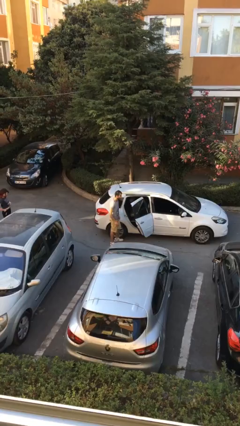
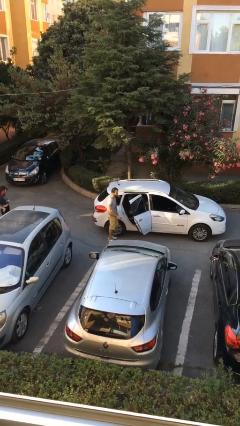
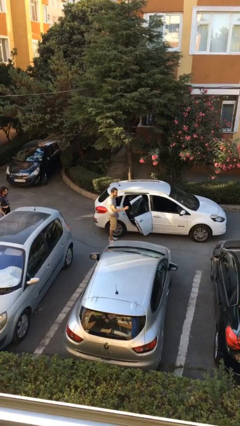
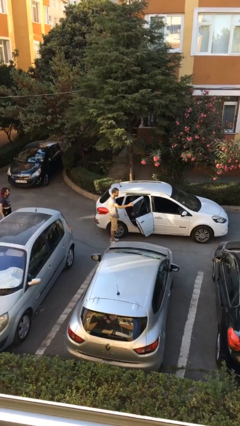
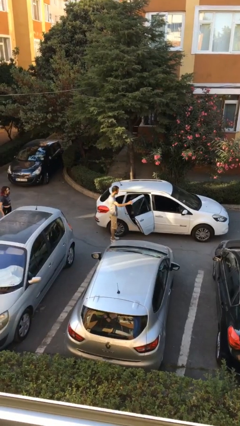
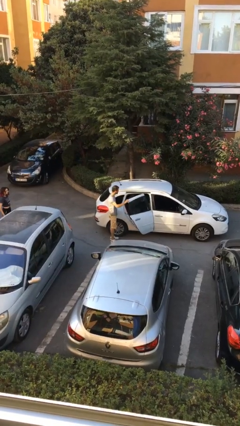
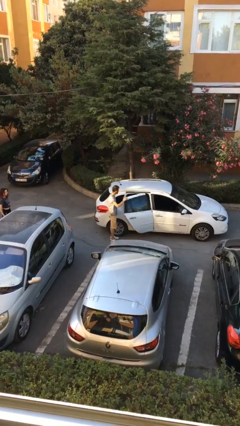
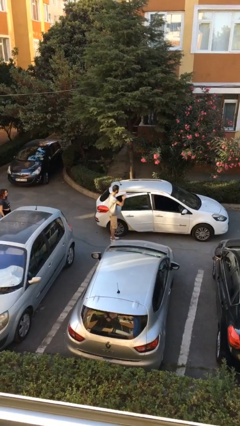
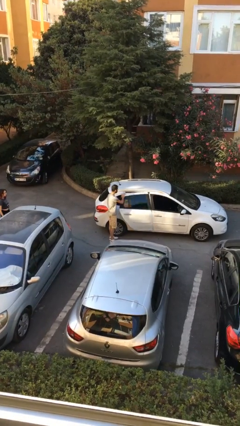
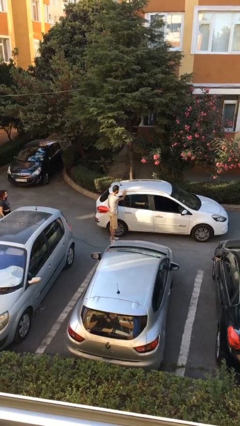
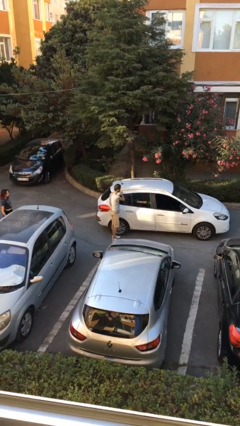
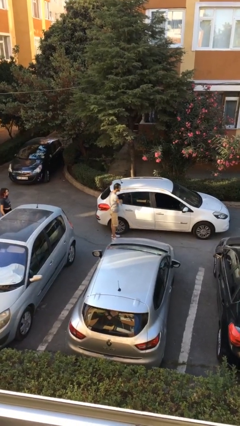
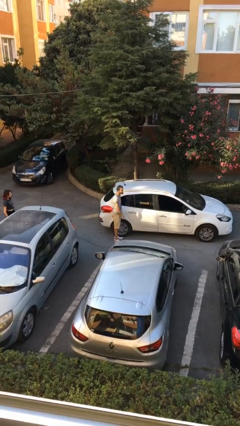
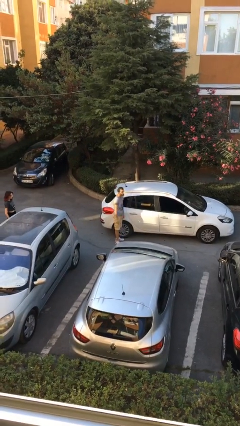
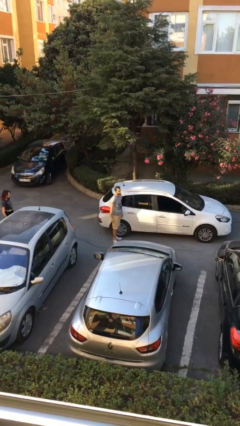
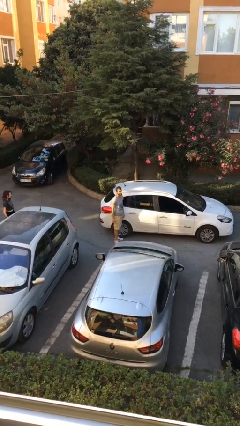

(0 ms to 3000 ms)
person closes car door

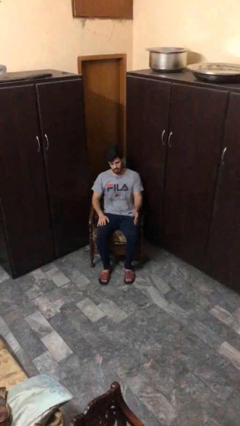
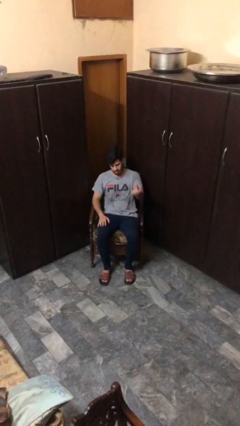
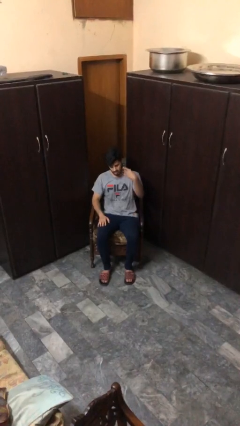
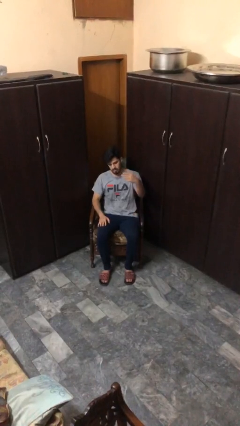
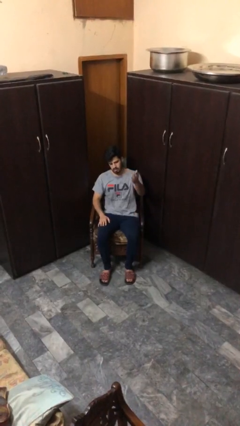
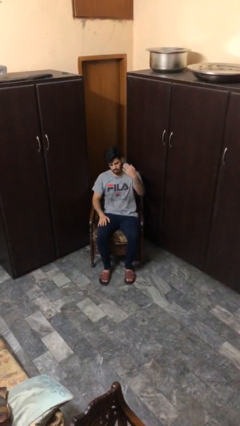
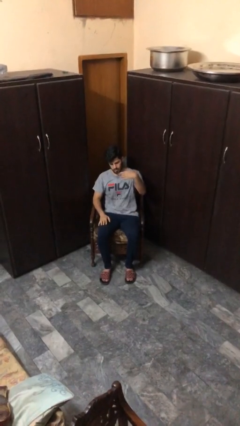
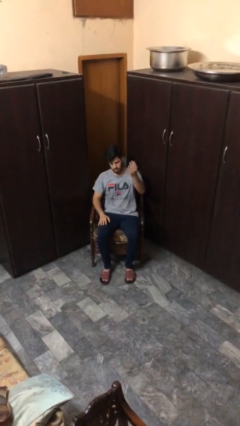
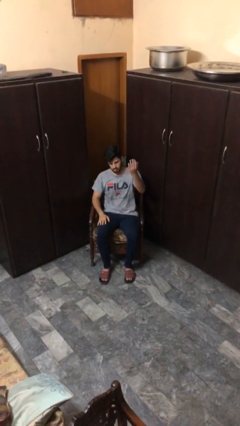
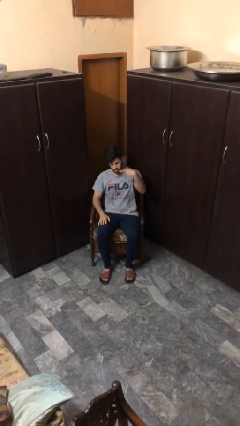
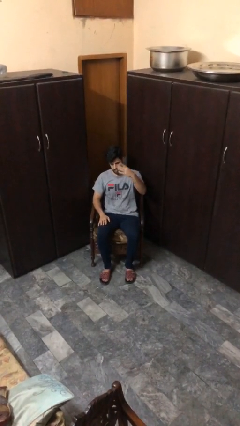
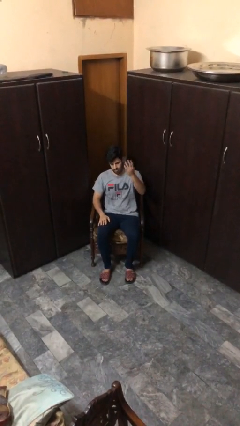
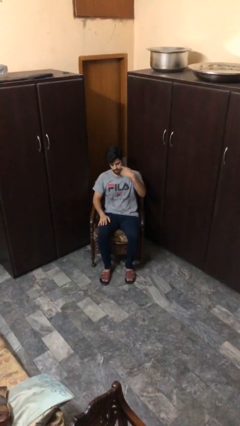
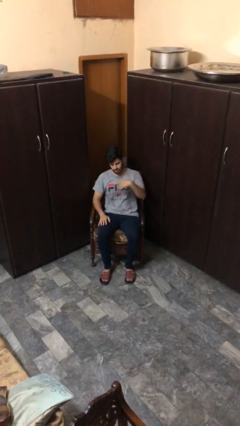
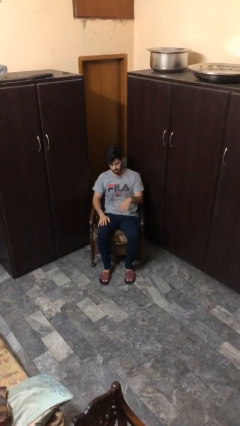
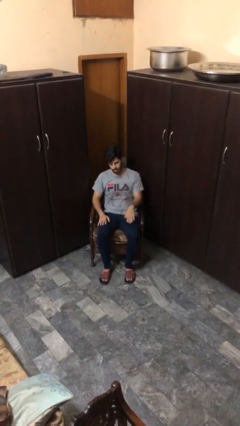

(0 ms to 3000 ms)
person gestures come here

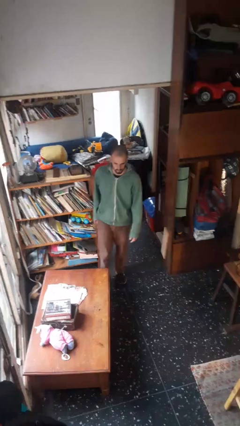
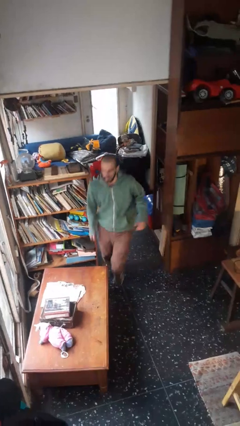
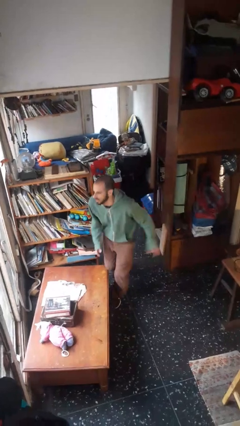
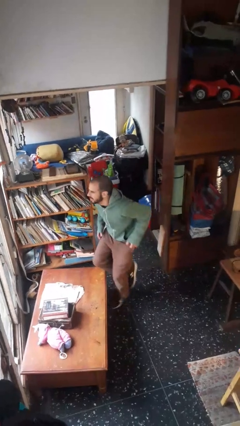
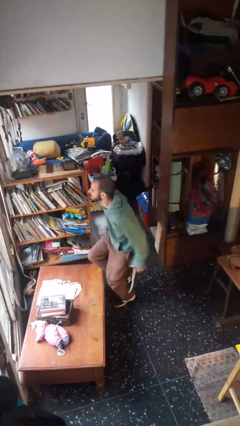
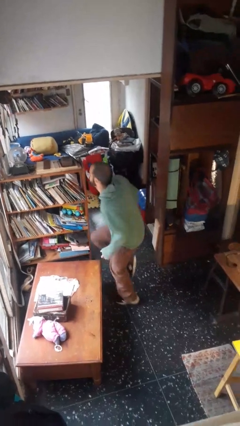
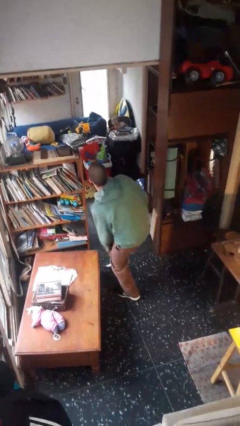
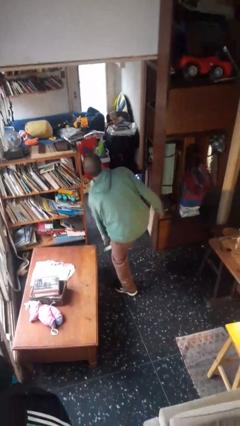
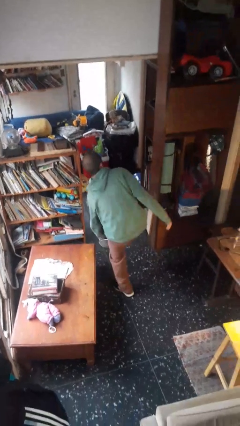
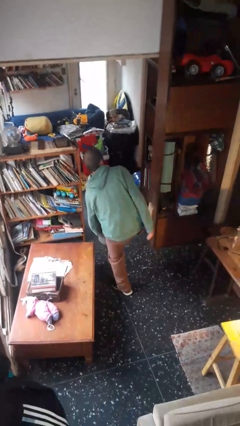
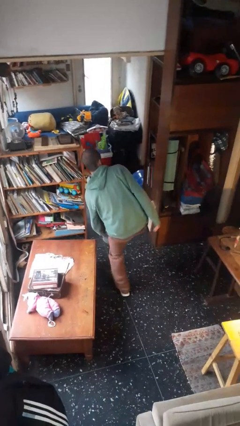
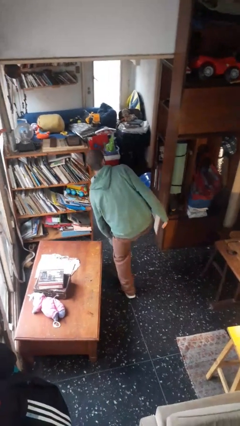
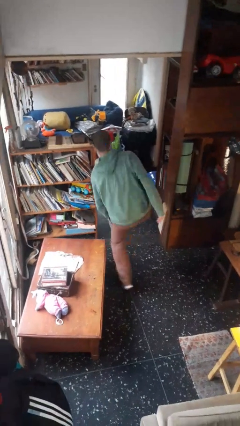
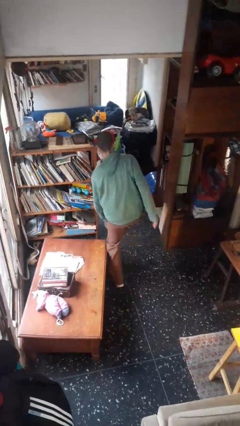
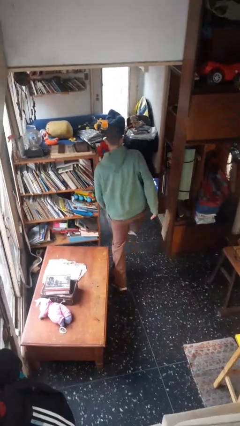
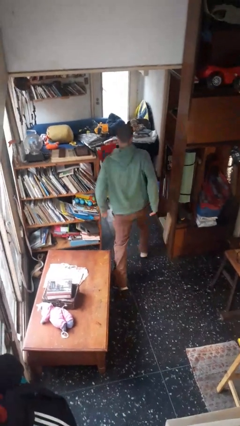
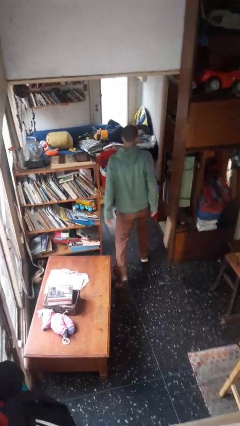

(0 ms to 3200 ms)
person bumps into table

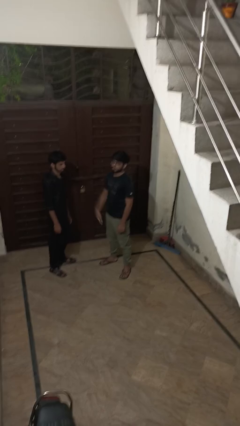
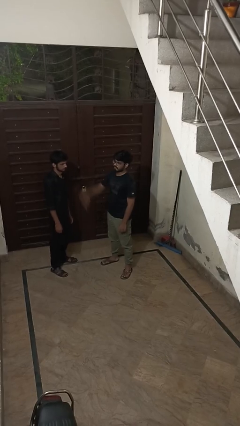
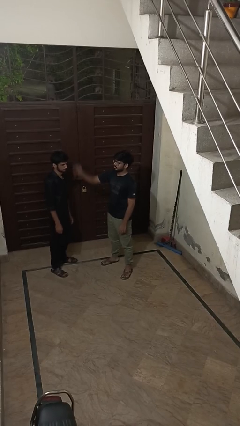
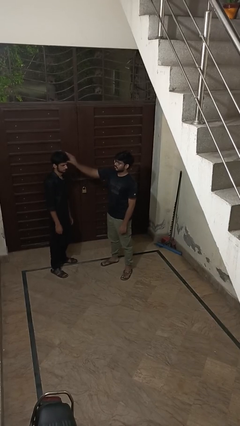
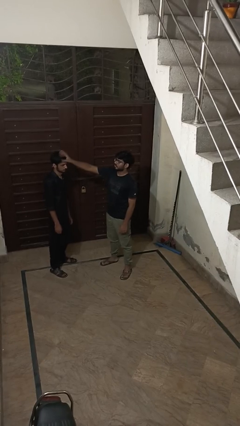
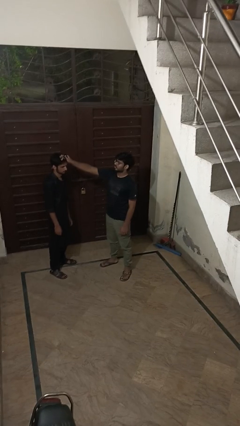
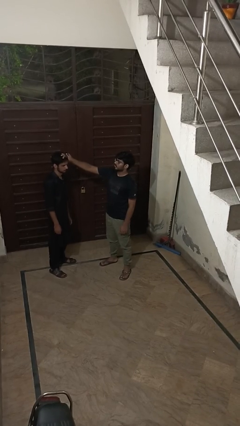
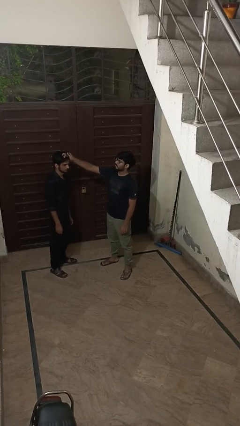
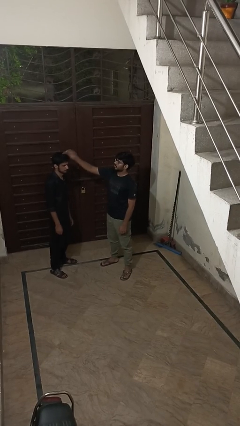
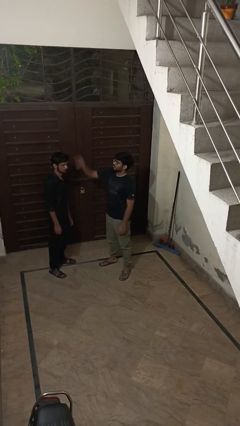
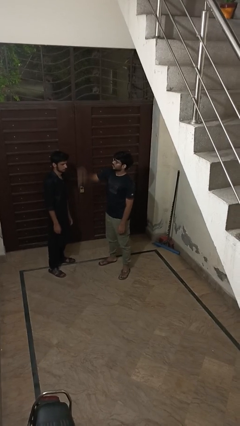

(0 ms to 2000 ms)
person grabs person by hair

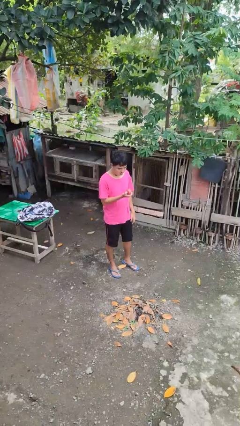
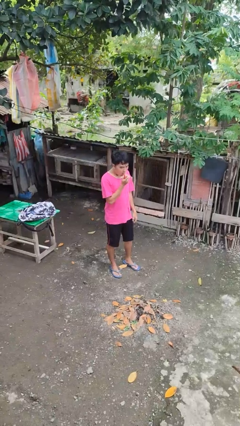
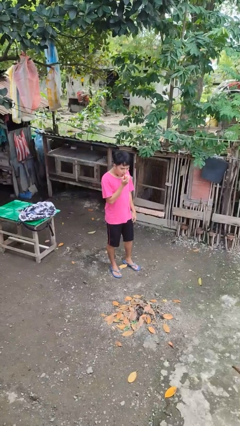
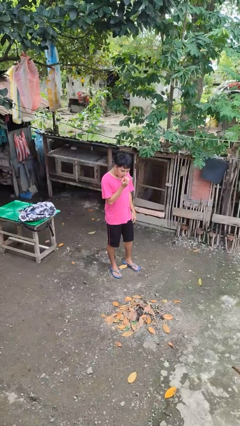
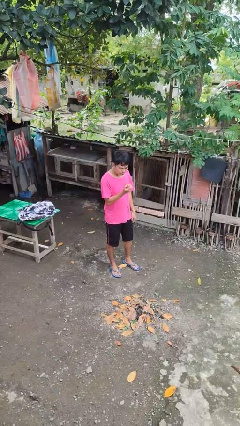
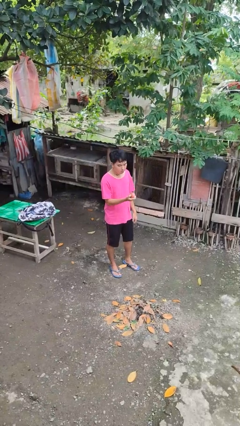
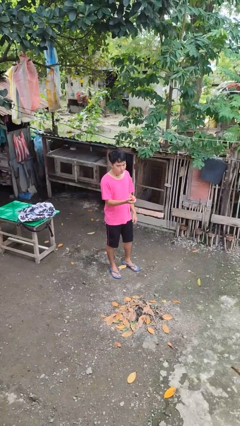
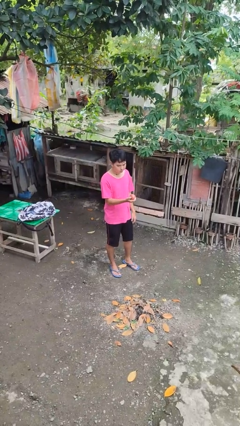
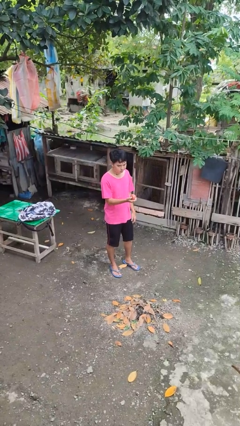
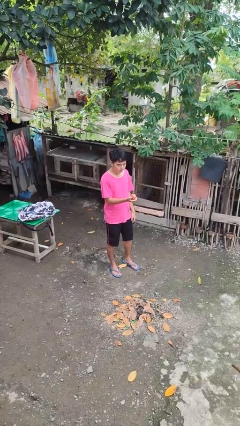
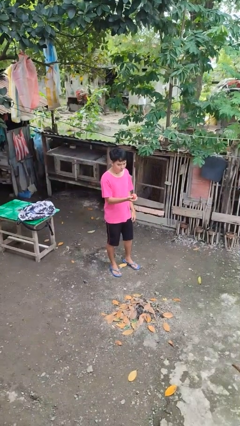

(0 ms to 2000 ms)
person eats apple

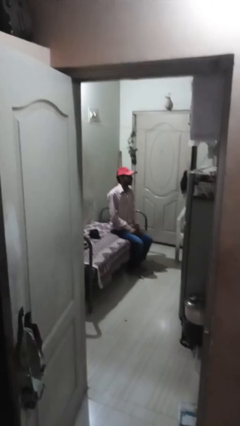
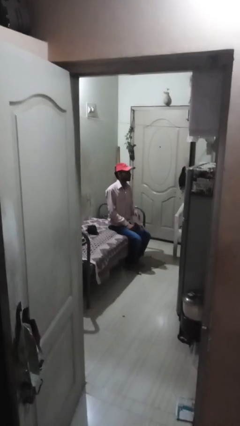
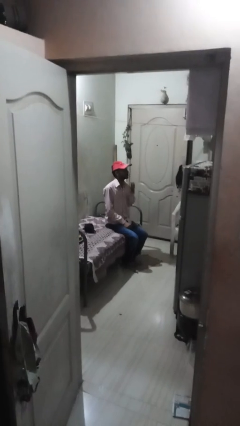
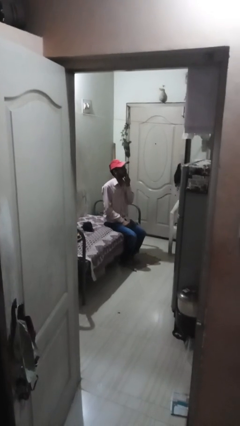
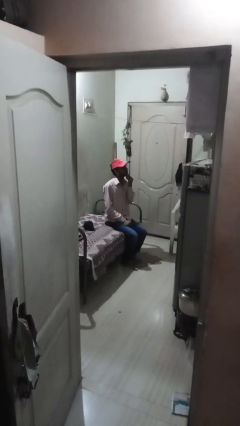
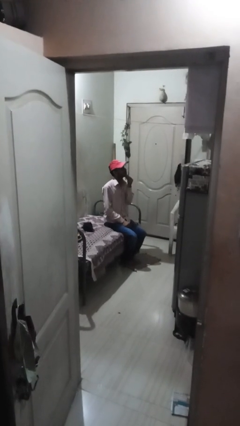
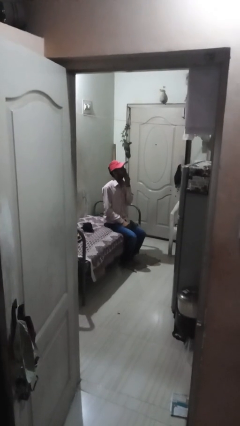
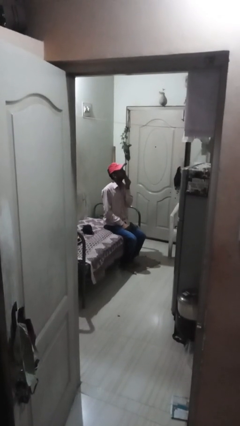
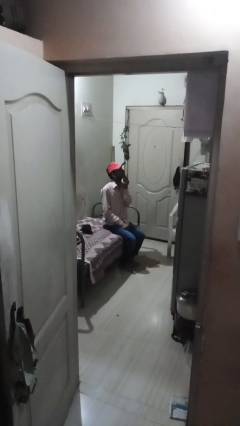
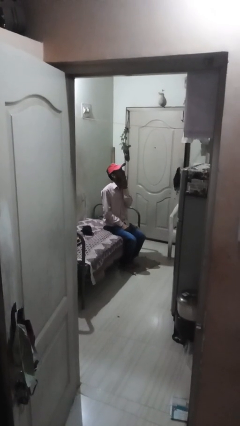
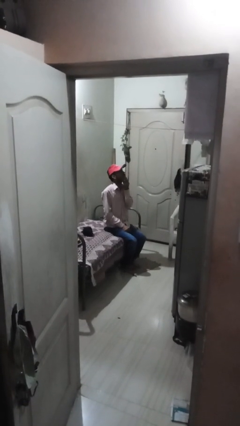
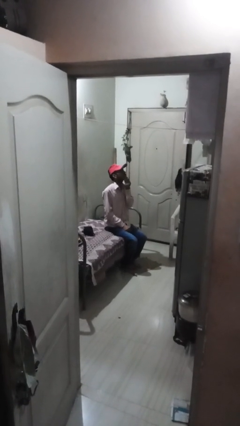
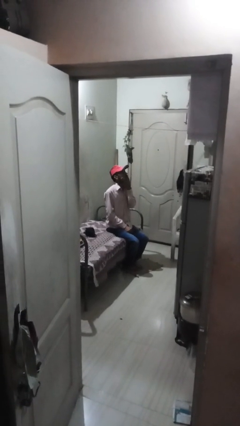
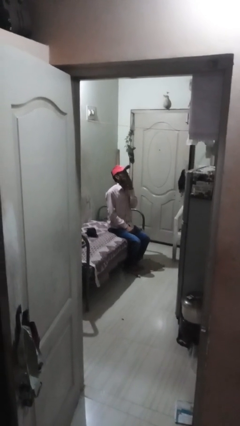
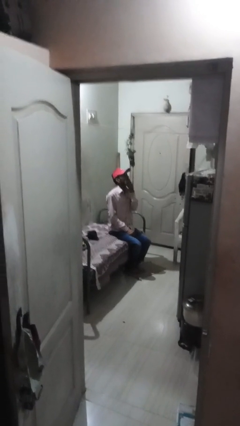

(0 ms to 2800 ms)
person strokes chin

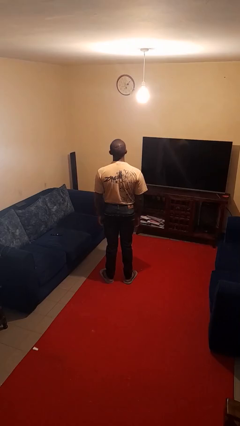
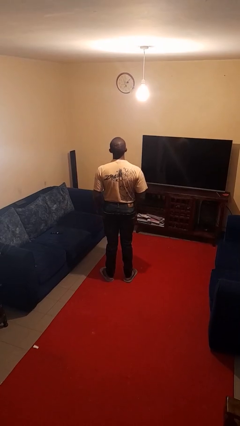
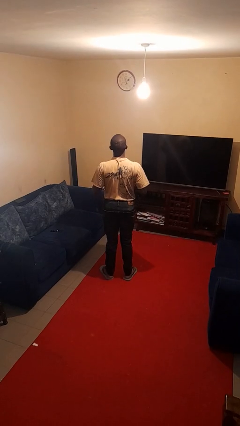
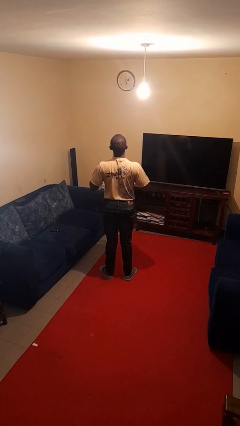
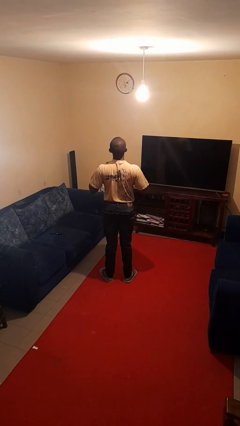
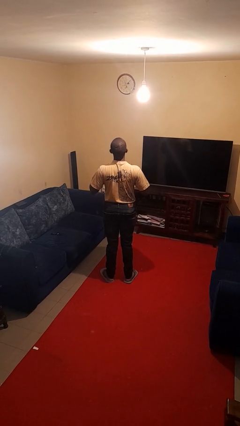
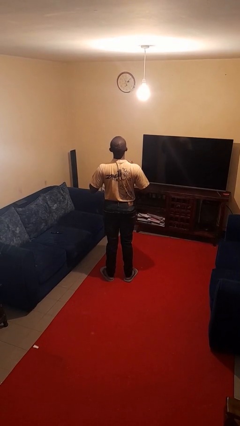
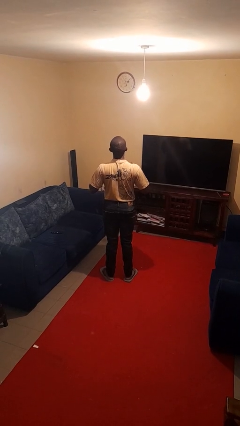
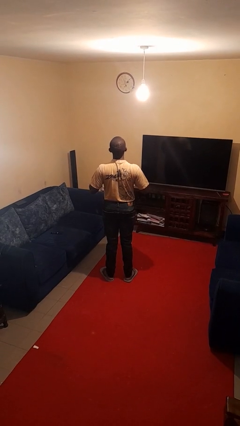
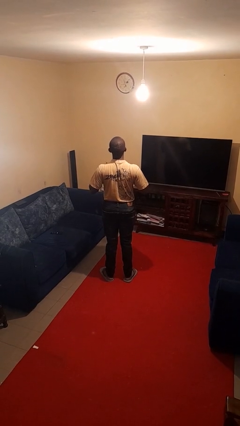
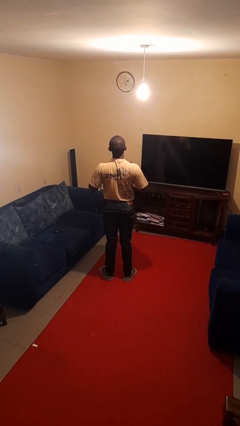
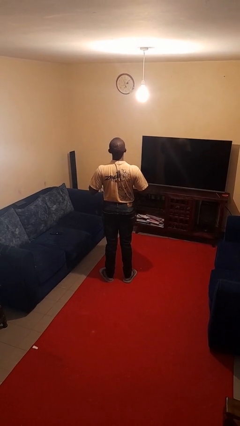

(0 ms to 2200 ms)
person drums on chest
